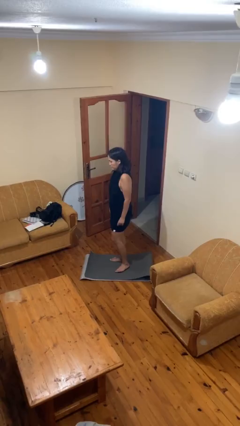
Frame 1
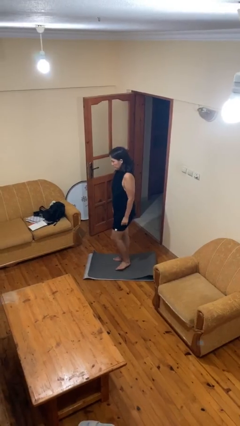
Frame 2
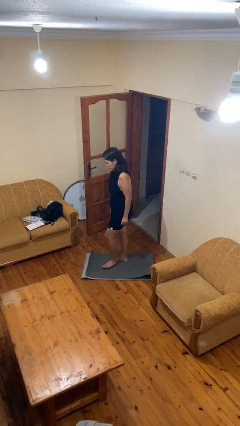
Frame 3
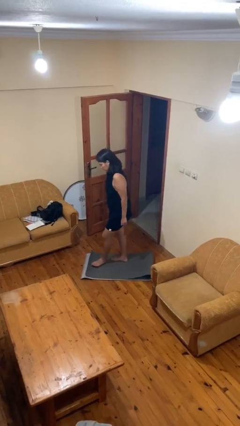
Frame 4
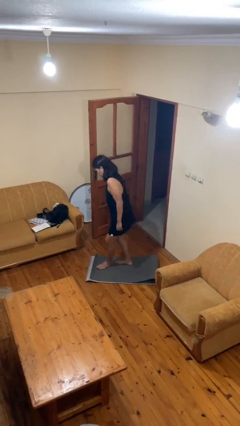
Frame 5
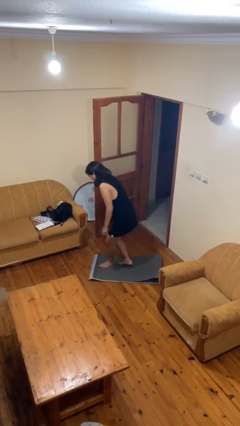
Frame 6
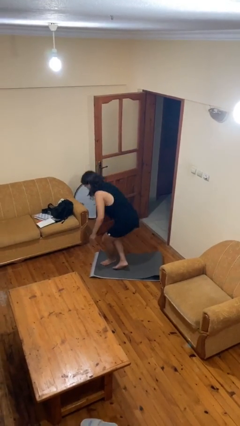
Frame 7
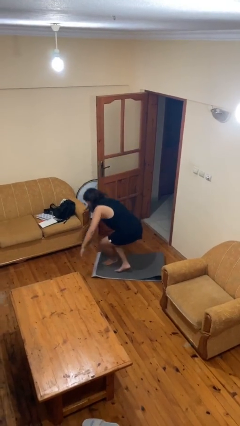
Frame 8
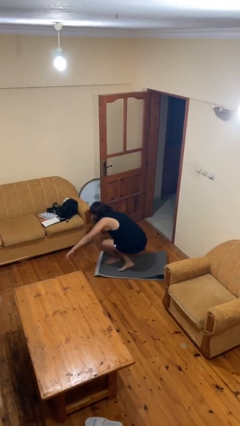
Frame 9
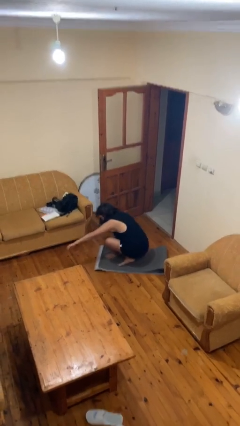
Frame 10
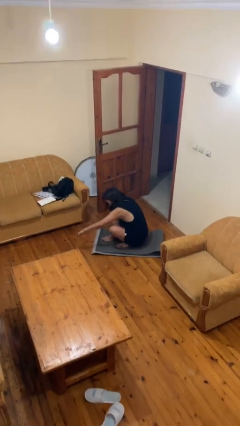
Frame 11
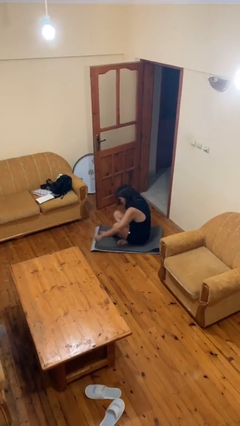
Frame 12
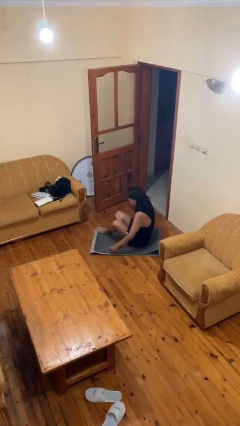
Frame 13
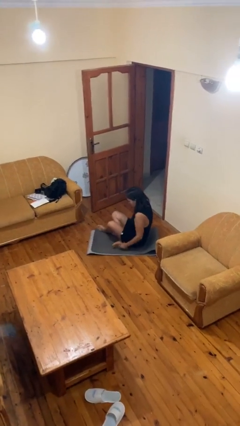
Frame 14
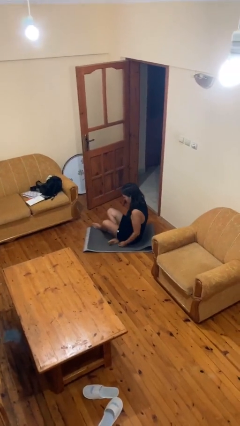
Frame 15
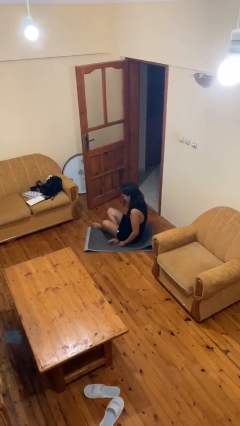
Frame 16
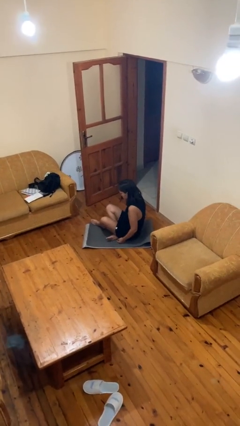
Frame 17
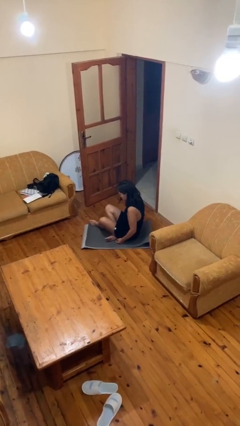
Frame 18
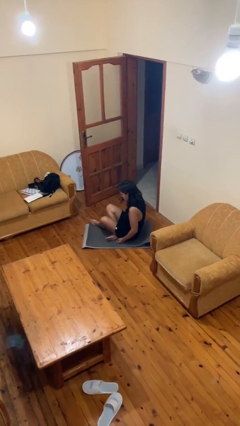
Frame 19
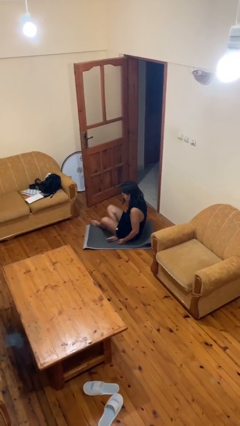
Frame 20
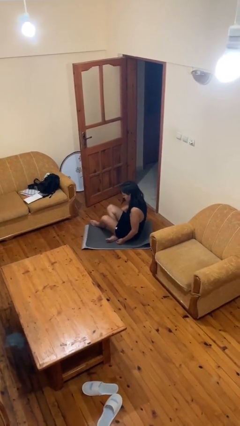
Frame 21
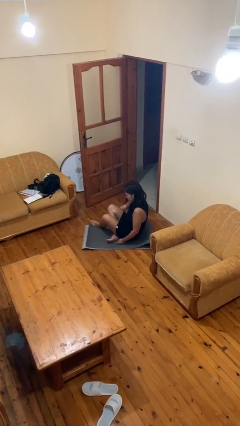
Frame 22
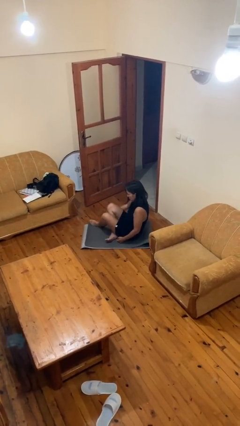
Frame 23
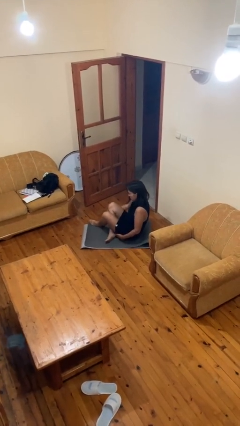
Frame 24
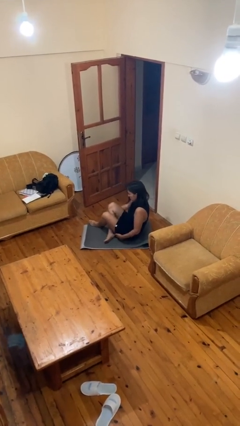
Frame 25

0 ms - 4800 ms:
person sits crisscross

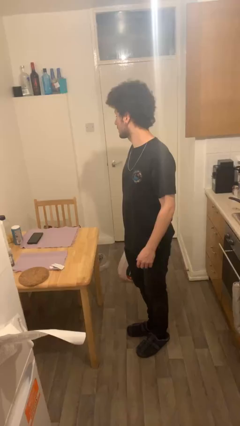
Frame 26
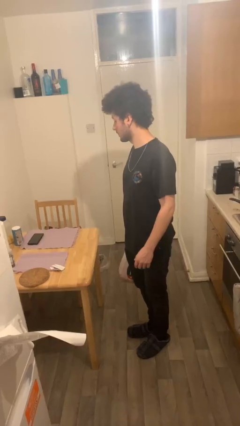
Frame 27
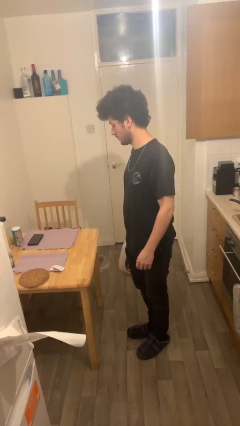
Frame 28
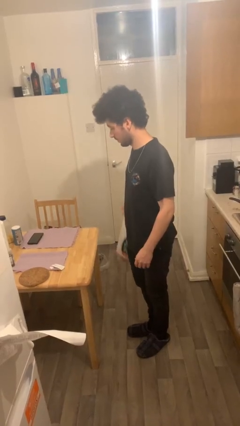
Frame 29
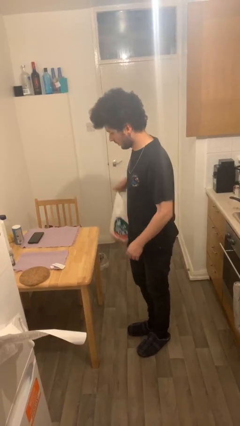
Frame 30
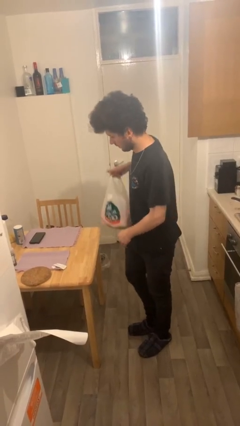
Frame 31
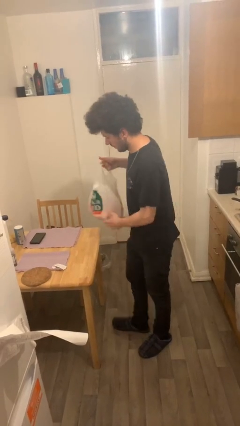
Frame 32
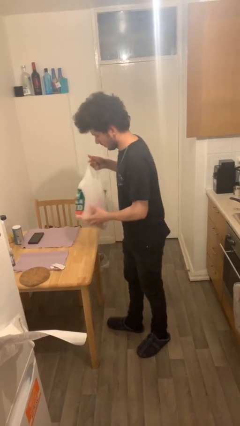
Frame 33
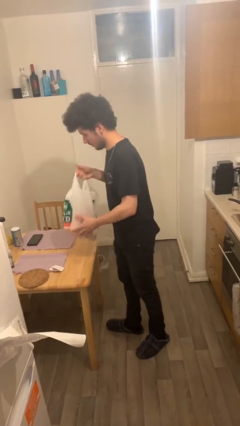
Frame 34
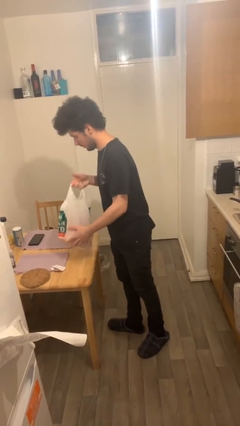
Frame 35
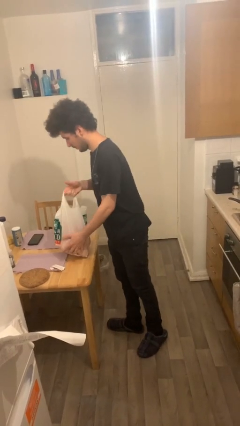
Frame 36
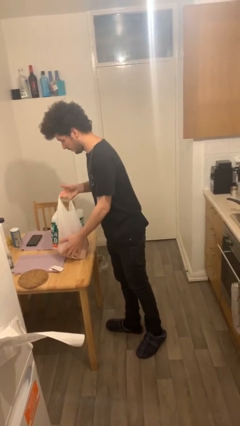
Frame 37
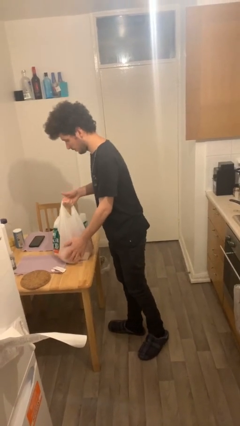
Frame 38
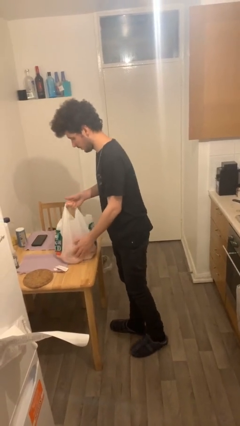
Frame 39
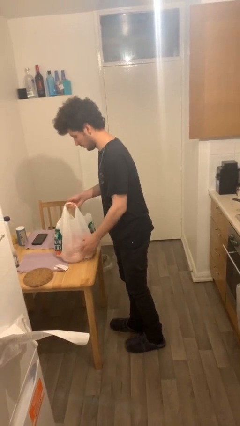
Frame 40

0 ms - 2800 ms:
person puts down object on table

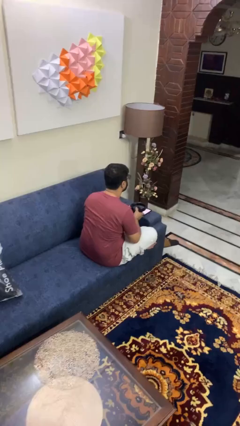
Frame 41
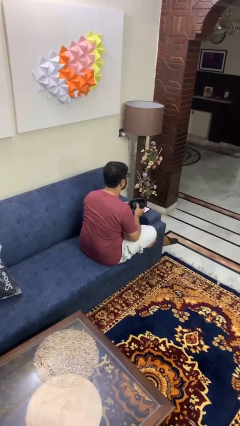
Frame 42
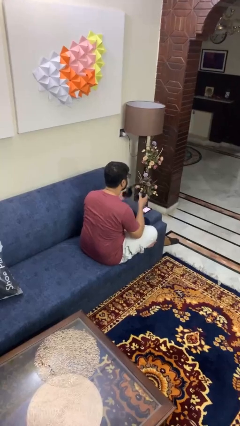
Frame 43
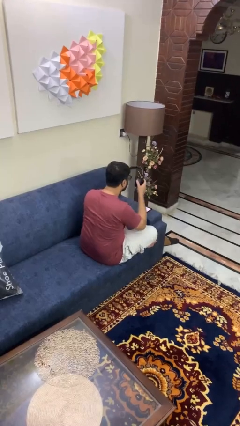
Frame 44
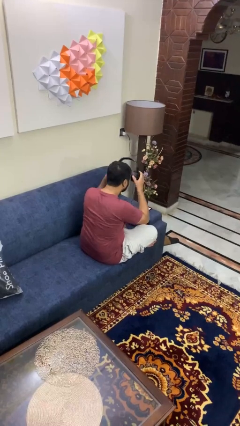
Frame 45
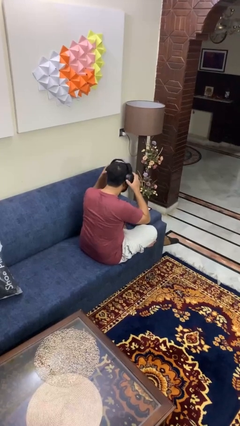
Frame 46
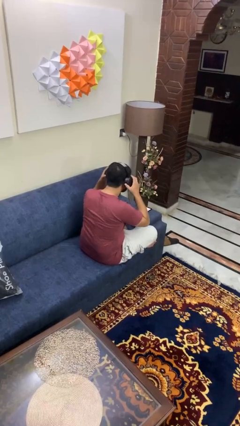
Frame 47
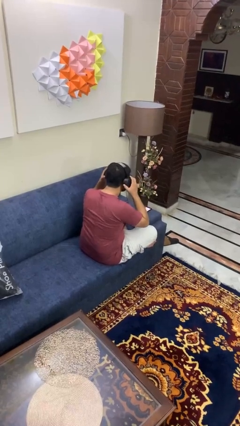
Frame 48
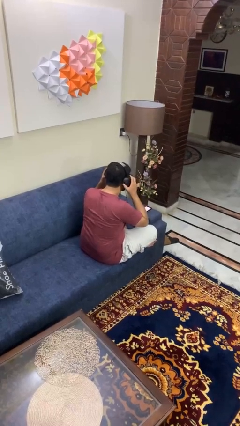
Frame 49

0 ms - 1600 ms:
person puts on headphones

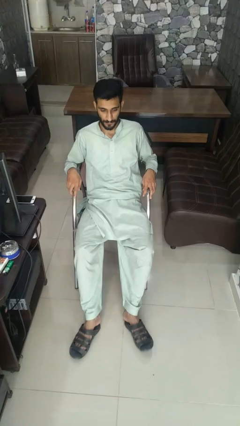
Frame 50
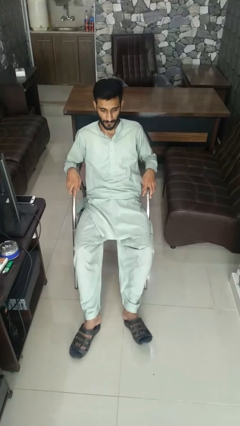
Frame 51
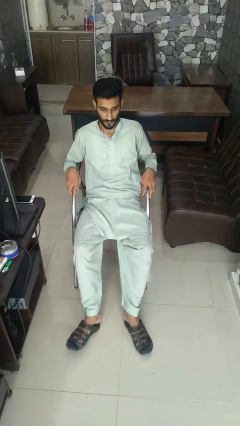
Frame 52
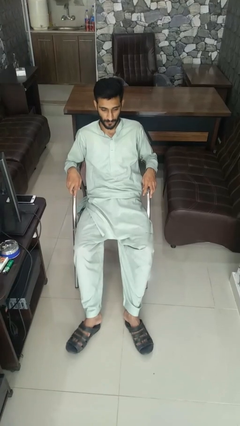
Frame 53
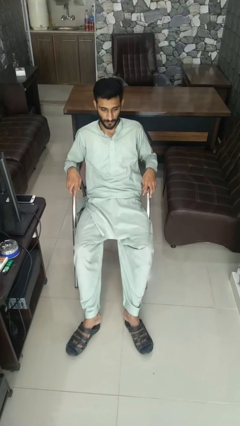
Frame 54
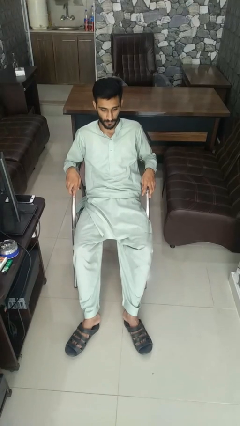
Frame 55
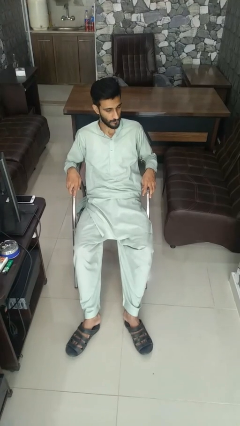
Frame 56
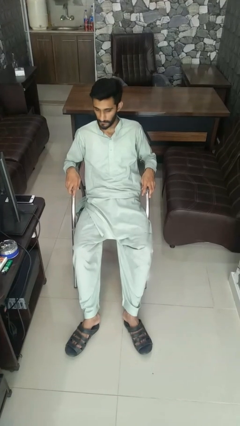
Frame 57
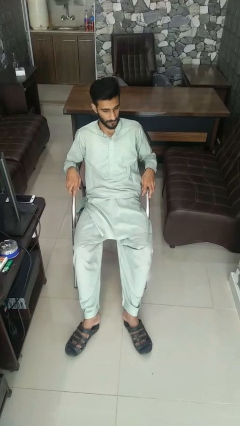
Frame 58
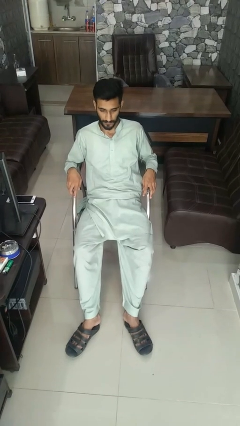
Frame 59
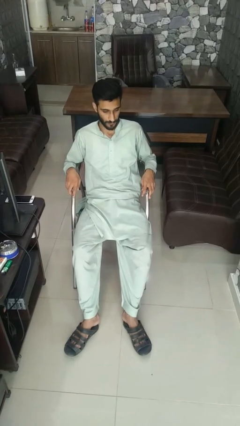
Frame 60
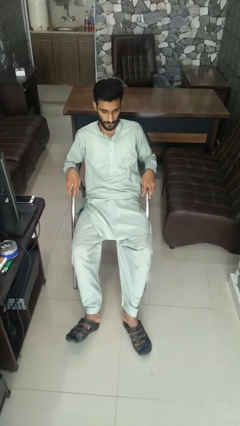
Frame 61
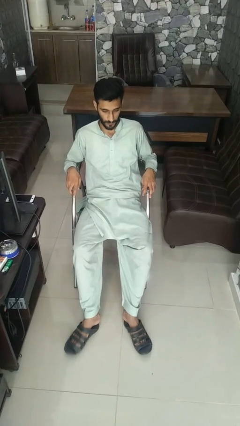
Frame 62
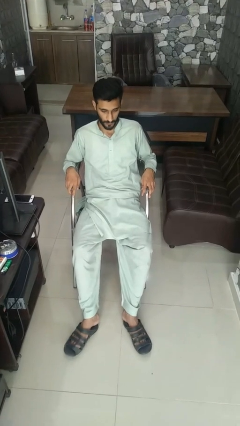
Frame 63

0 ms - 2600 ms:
person shakes head

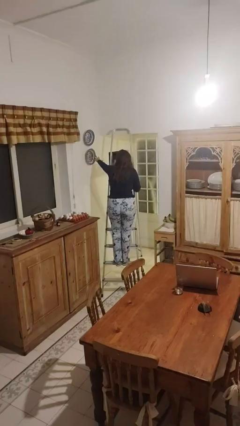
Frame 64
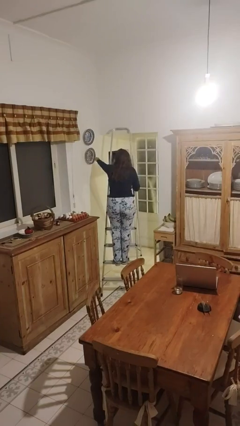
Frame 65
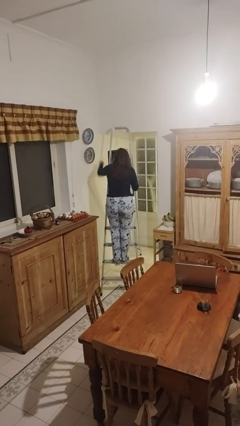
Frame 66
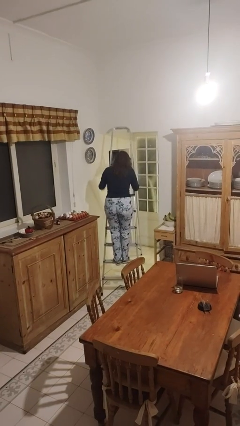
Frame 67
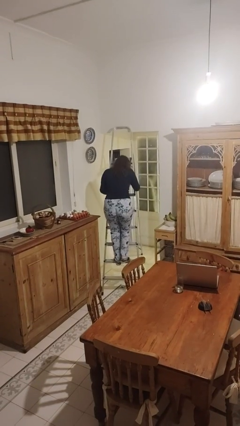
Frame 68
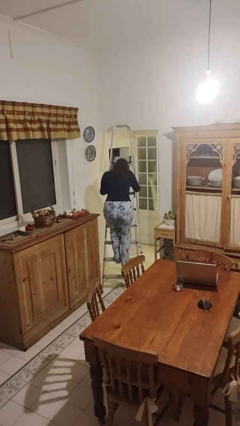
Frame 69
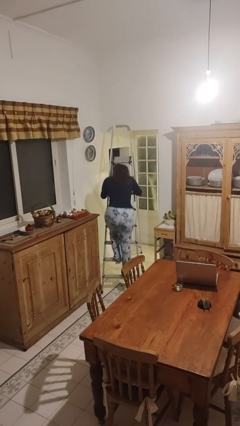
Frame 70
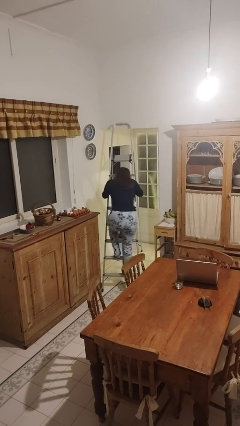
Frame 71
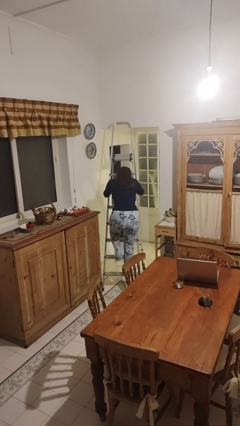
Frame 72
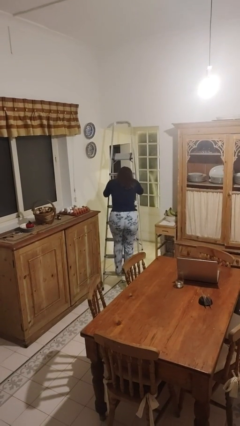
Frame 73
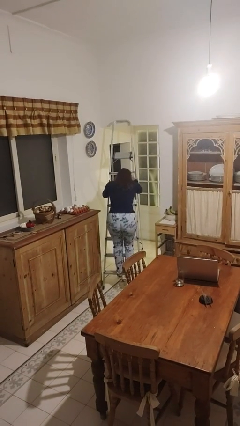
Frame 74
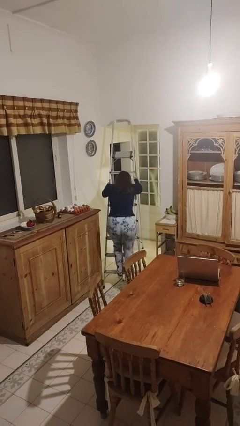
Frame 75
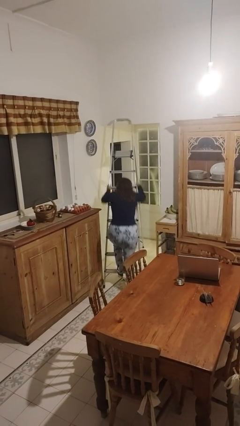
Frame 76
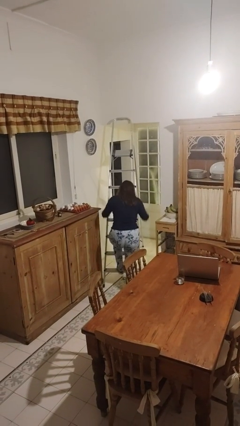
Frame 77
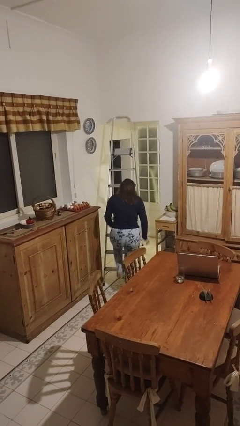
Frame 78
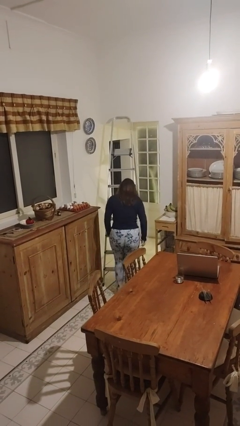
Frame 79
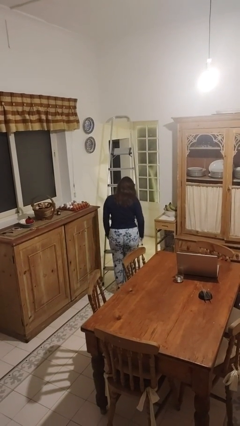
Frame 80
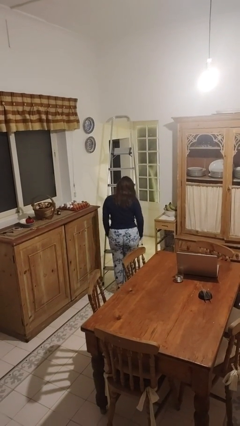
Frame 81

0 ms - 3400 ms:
person climbs down ladder

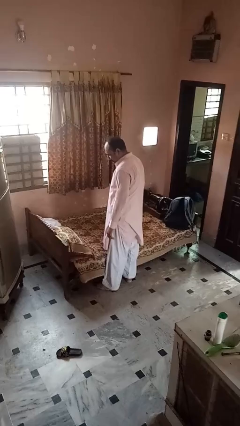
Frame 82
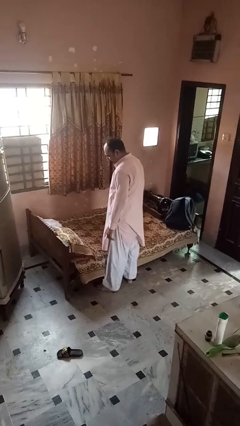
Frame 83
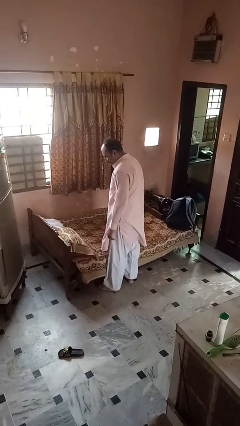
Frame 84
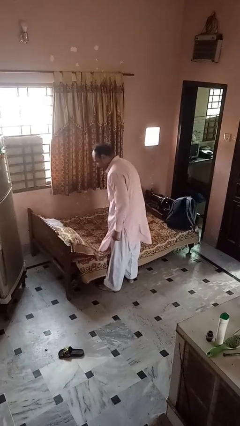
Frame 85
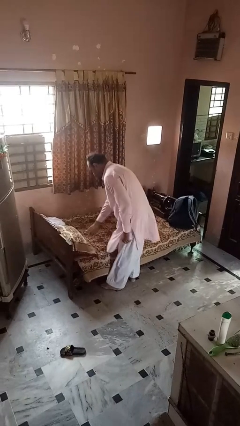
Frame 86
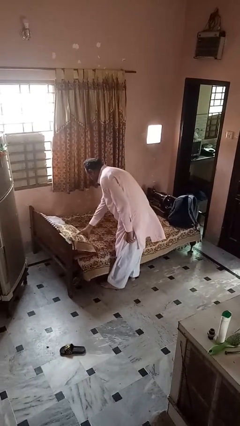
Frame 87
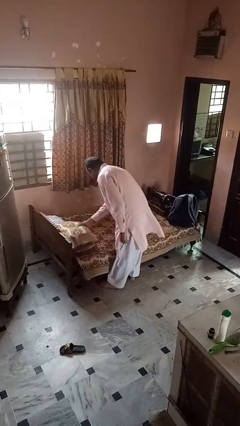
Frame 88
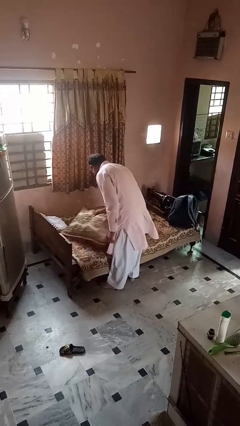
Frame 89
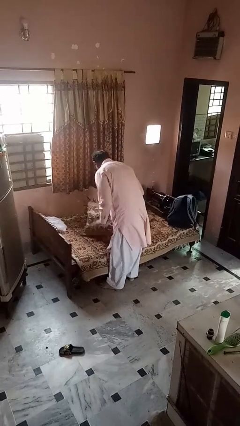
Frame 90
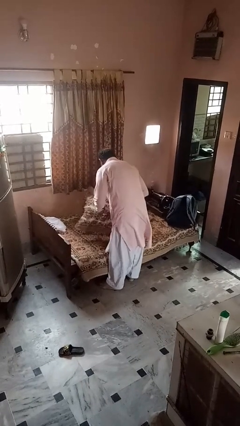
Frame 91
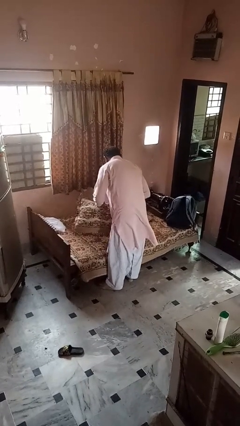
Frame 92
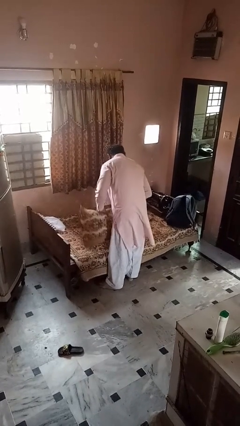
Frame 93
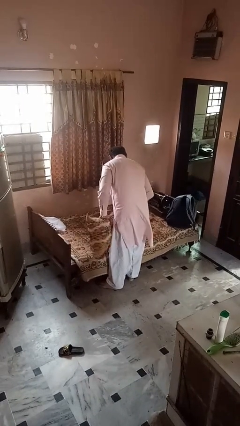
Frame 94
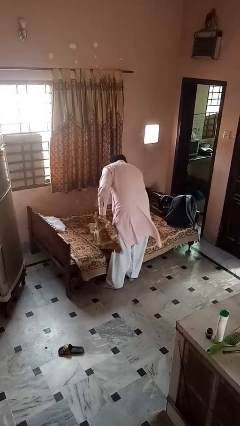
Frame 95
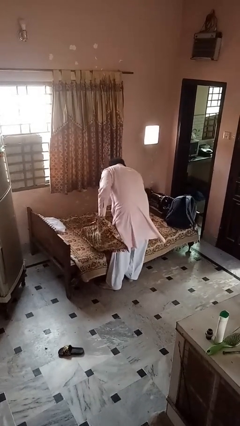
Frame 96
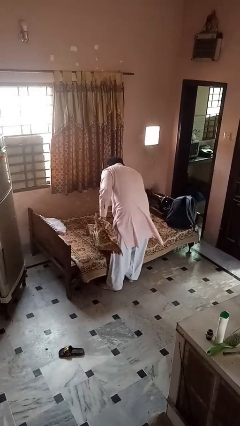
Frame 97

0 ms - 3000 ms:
person searches under bed
